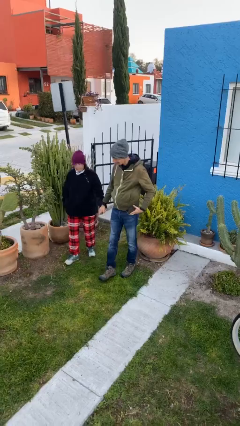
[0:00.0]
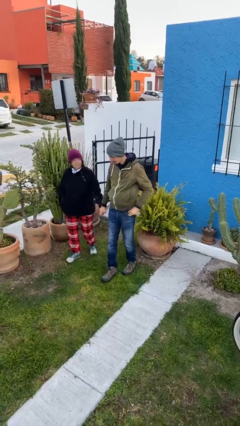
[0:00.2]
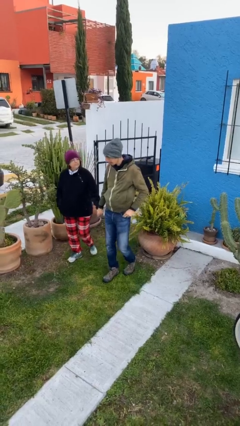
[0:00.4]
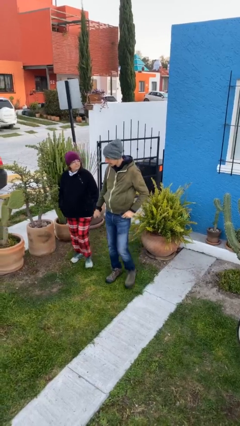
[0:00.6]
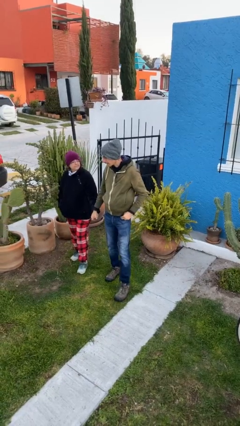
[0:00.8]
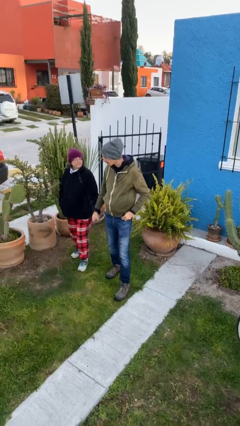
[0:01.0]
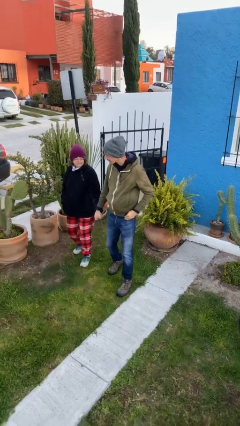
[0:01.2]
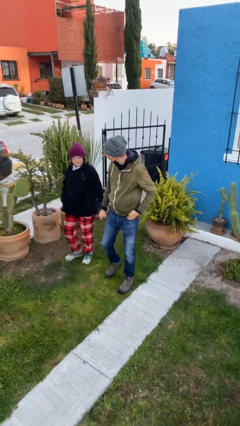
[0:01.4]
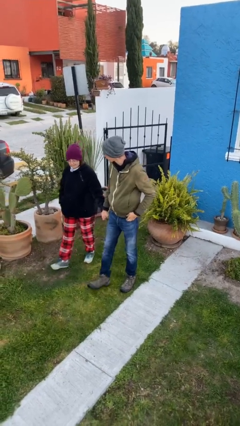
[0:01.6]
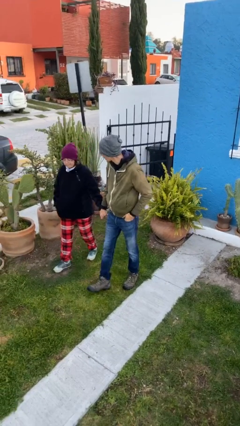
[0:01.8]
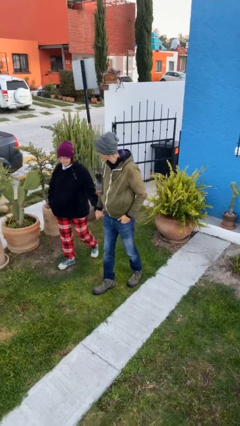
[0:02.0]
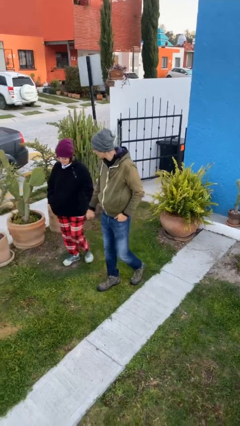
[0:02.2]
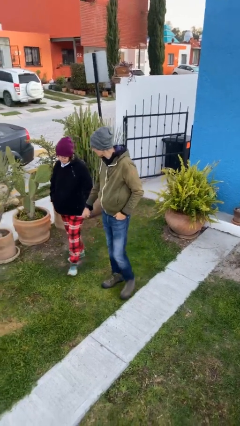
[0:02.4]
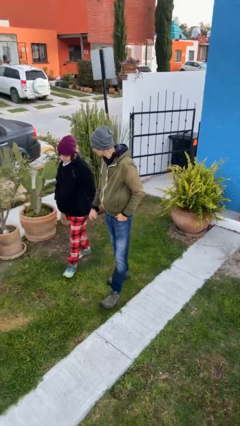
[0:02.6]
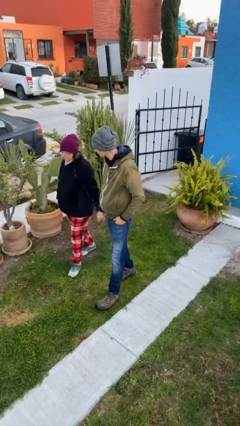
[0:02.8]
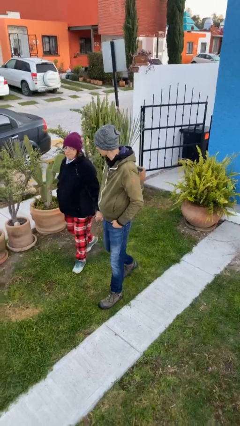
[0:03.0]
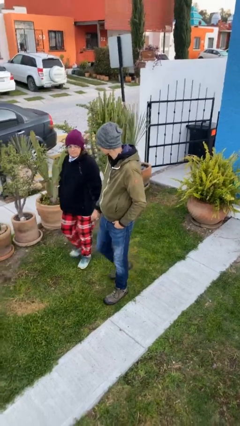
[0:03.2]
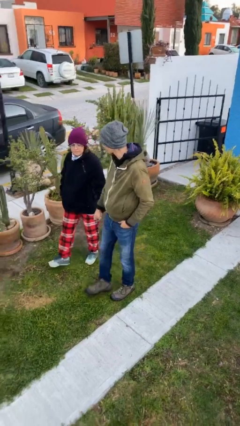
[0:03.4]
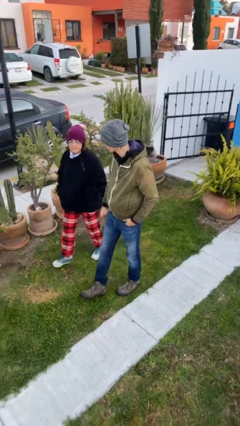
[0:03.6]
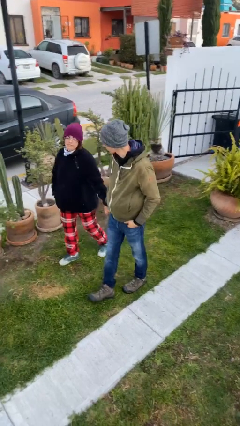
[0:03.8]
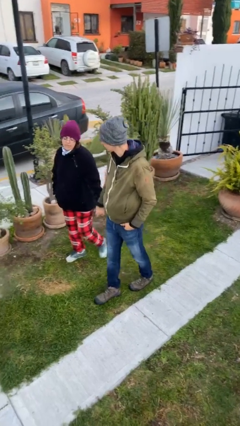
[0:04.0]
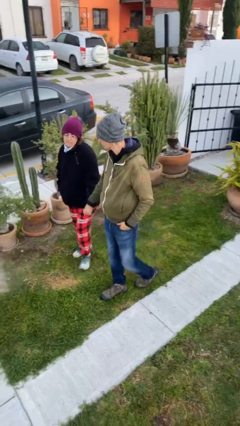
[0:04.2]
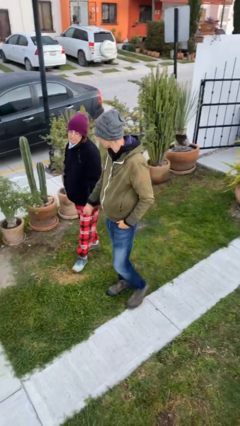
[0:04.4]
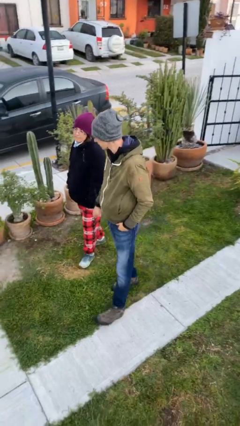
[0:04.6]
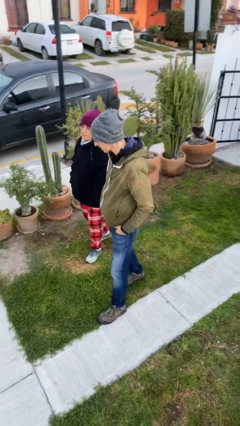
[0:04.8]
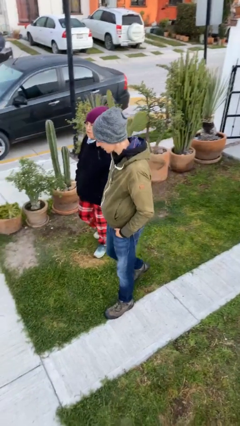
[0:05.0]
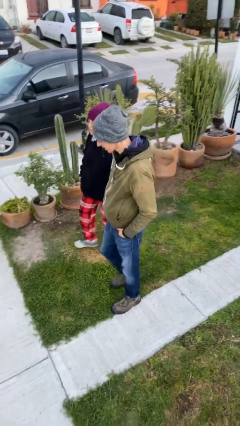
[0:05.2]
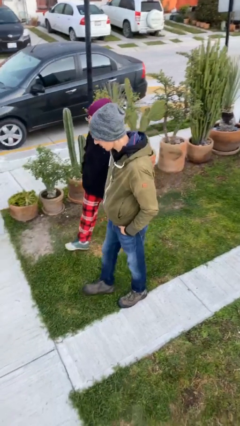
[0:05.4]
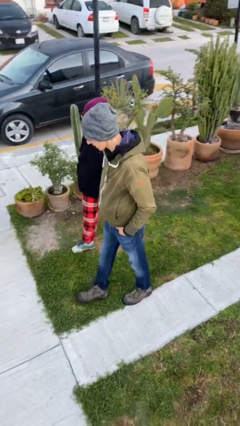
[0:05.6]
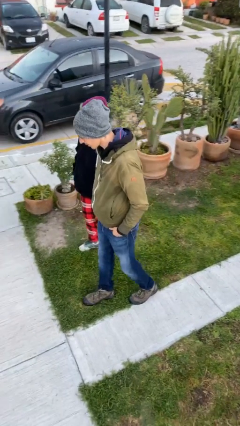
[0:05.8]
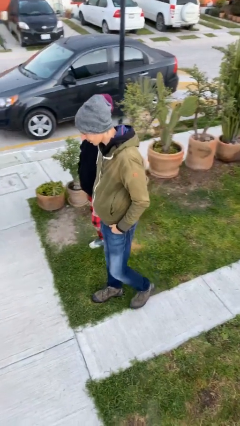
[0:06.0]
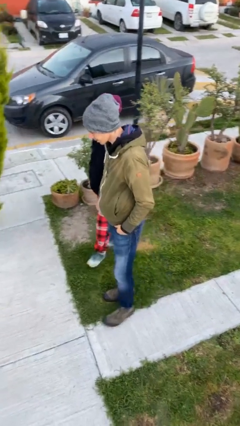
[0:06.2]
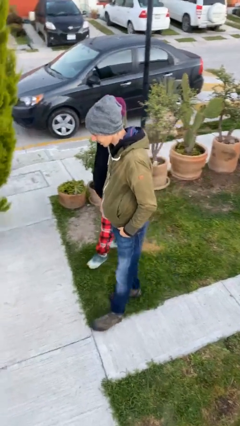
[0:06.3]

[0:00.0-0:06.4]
person holds hand

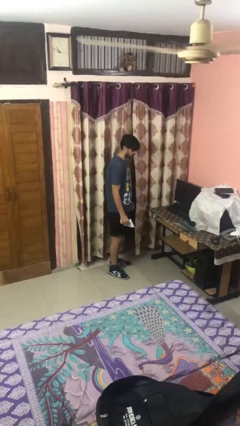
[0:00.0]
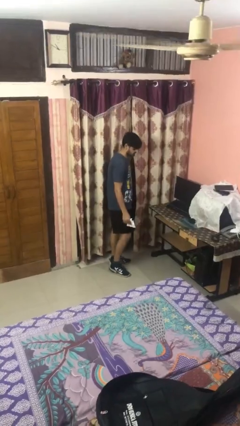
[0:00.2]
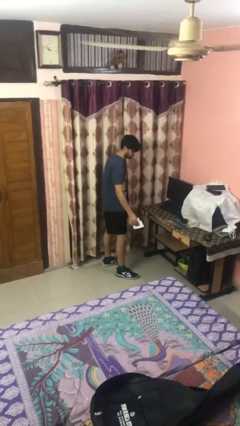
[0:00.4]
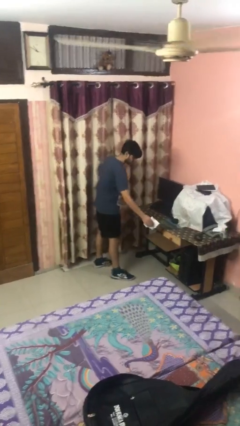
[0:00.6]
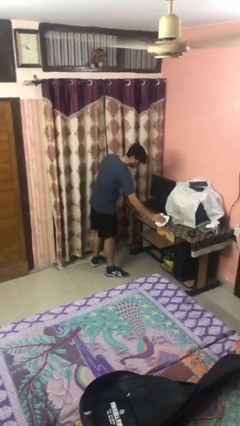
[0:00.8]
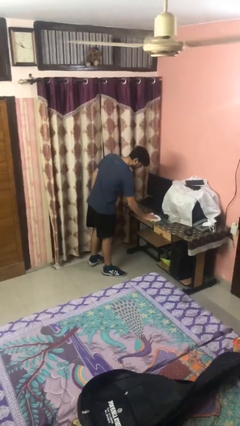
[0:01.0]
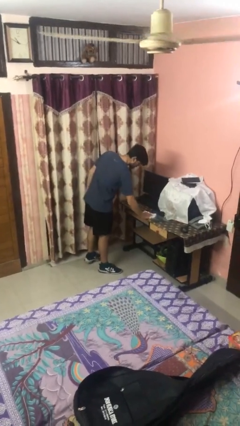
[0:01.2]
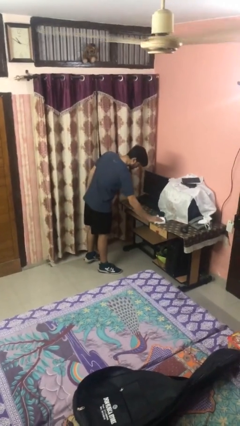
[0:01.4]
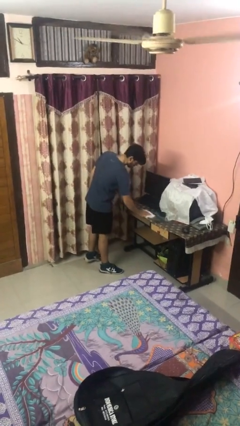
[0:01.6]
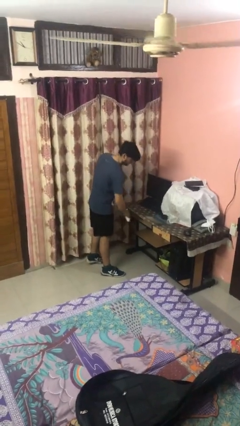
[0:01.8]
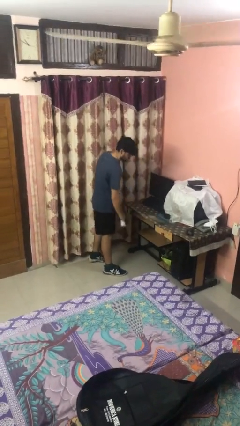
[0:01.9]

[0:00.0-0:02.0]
person cleans table with rag

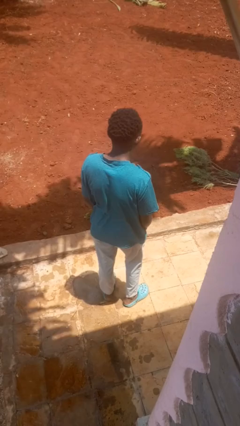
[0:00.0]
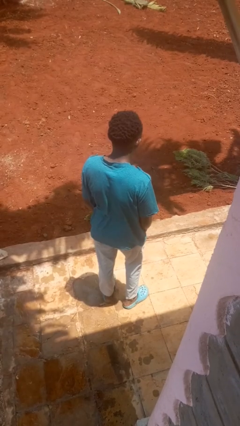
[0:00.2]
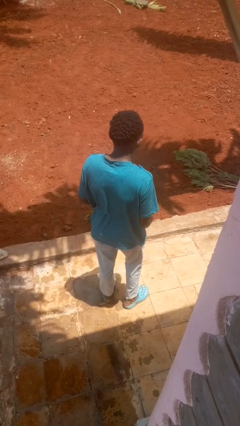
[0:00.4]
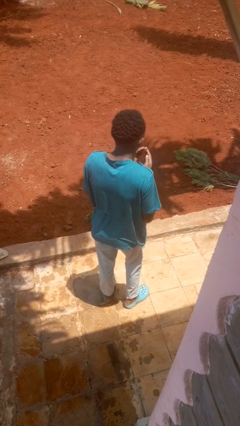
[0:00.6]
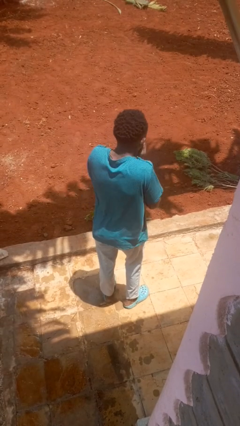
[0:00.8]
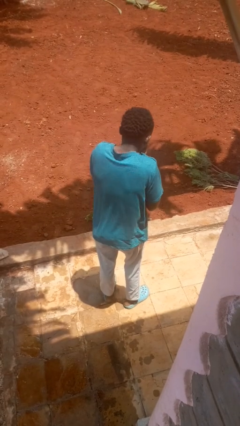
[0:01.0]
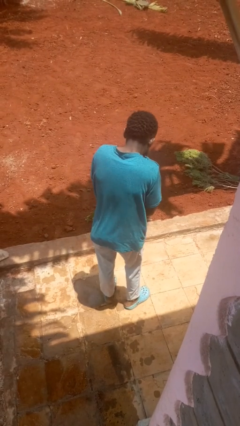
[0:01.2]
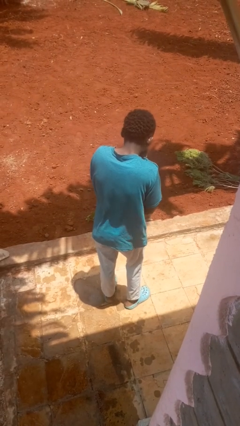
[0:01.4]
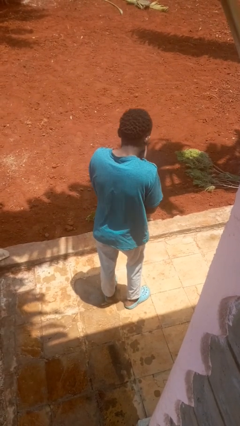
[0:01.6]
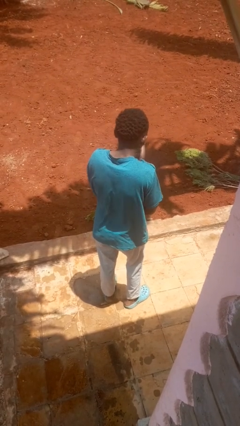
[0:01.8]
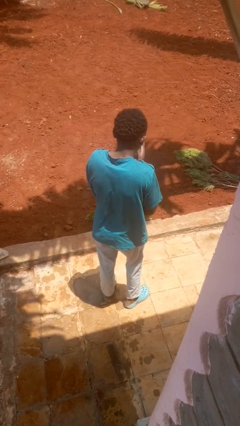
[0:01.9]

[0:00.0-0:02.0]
person sneezes into hand

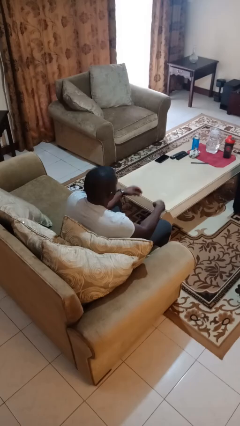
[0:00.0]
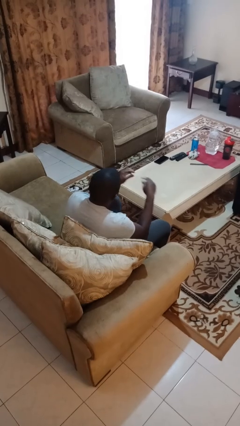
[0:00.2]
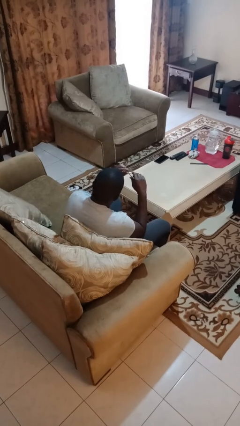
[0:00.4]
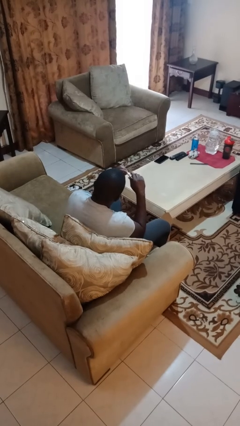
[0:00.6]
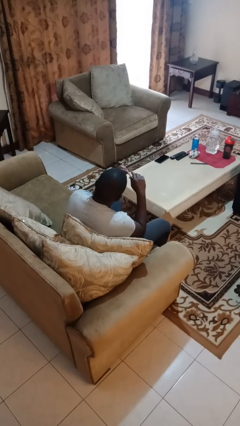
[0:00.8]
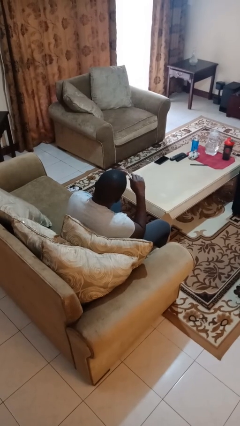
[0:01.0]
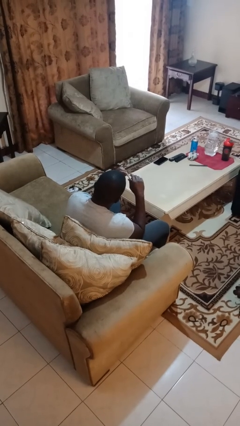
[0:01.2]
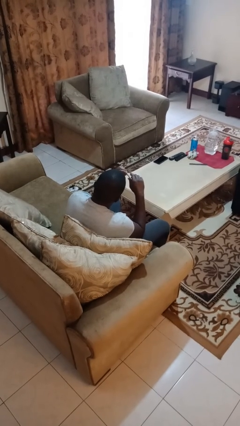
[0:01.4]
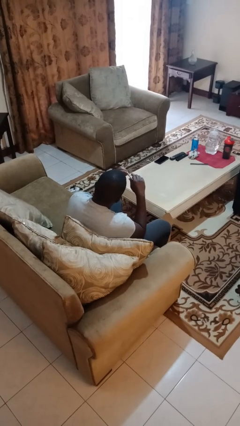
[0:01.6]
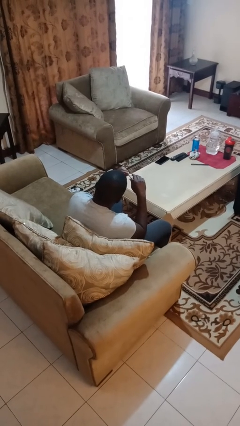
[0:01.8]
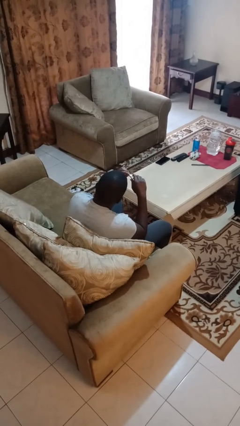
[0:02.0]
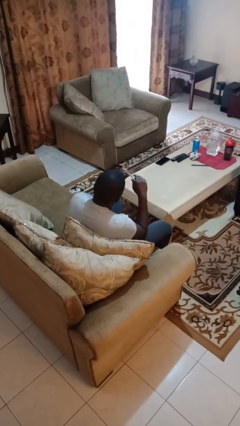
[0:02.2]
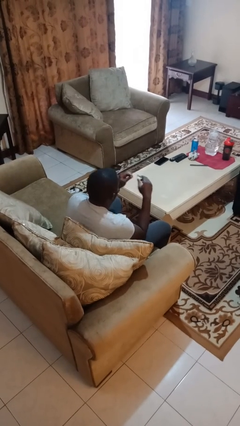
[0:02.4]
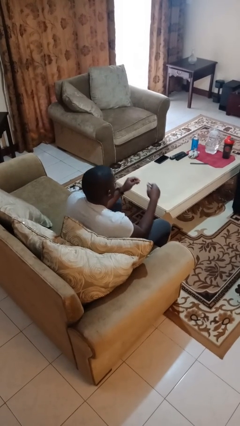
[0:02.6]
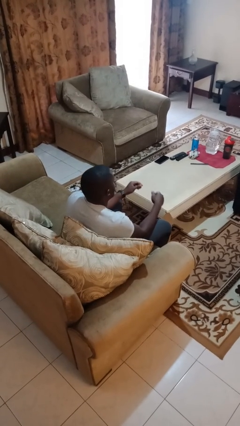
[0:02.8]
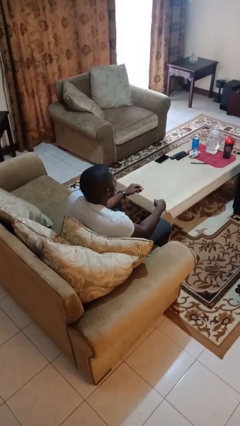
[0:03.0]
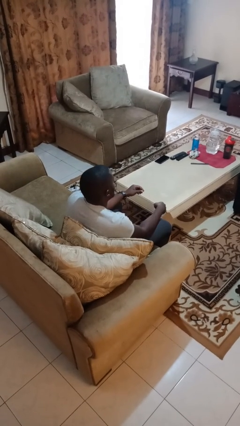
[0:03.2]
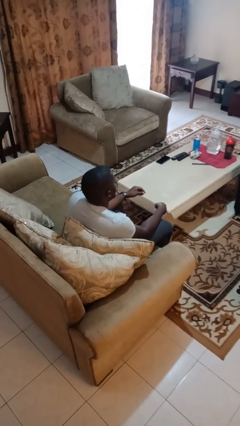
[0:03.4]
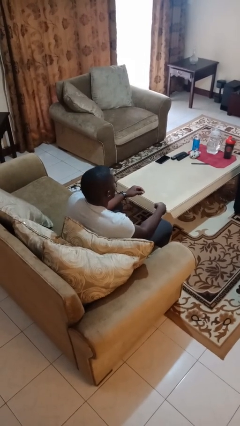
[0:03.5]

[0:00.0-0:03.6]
person clips fingernails

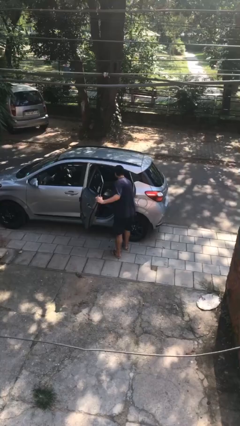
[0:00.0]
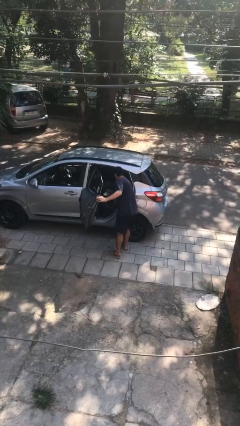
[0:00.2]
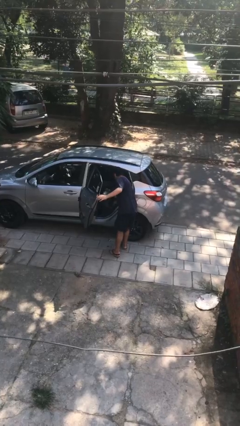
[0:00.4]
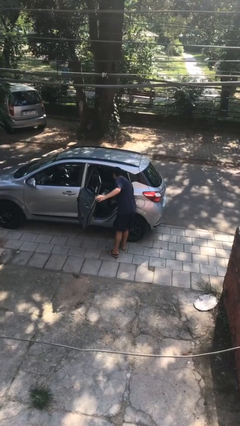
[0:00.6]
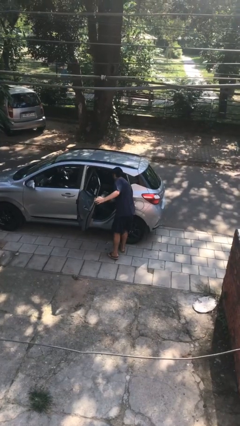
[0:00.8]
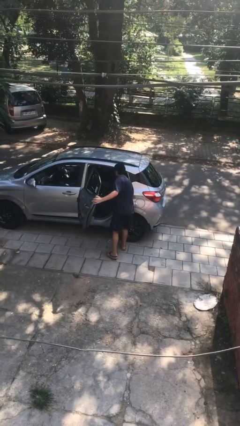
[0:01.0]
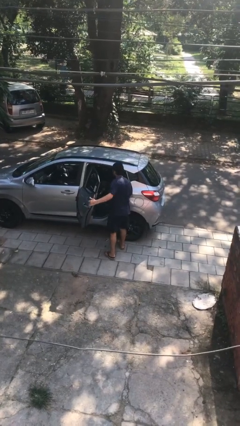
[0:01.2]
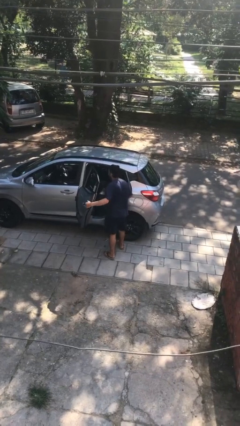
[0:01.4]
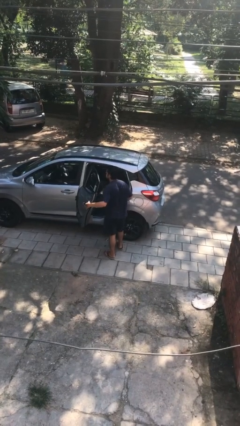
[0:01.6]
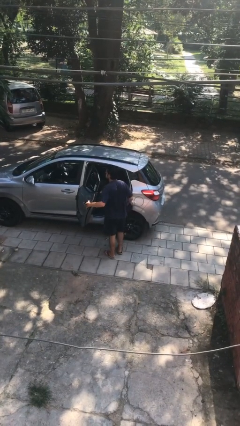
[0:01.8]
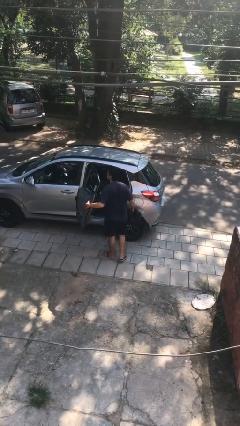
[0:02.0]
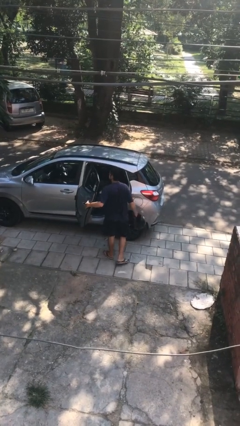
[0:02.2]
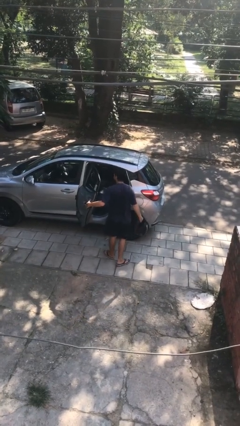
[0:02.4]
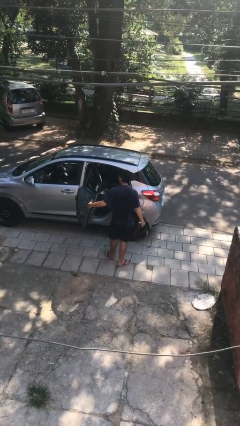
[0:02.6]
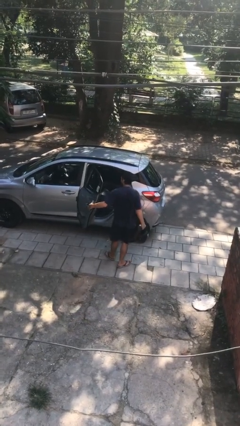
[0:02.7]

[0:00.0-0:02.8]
person unloads car

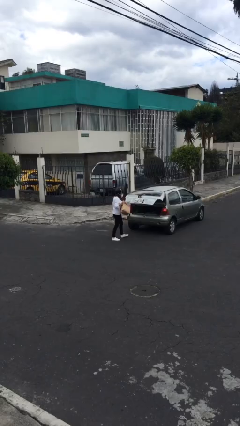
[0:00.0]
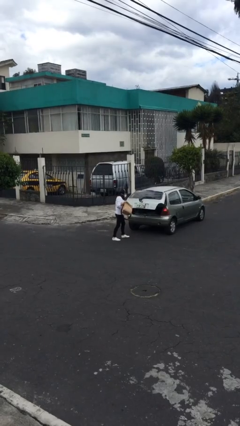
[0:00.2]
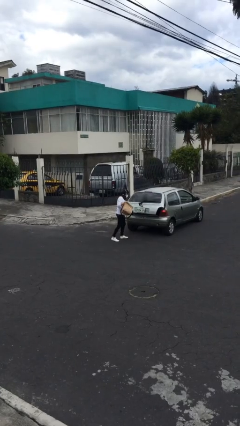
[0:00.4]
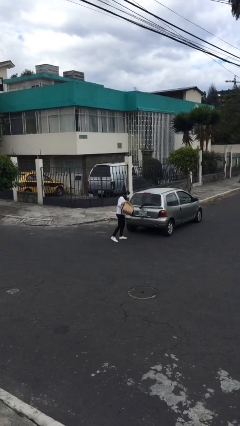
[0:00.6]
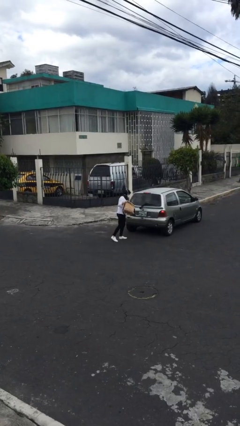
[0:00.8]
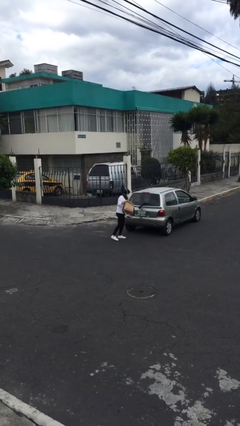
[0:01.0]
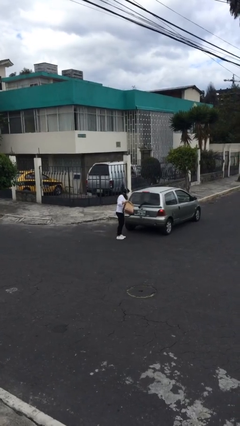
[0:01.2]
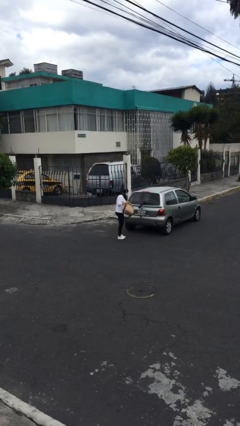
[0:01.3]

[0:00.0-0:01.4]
person closes car door
